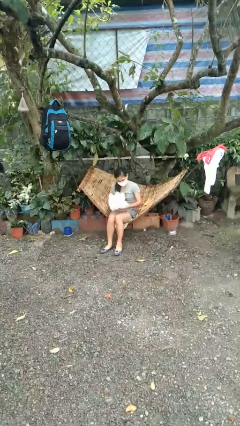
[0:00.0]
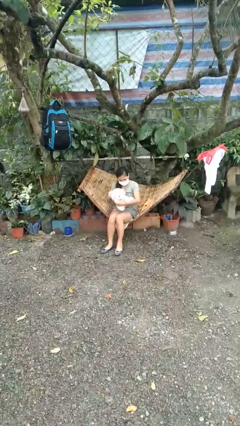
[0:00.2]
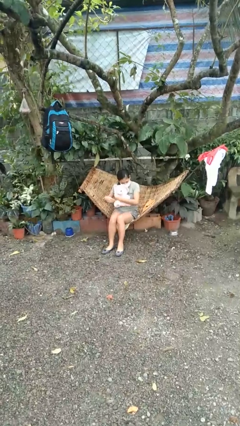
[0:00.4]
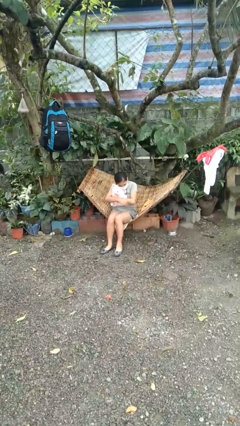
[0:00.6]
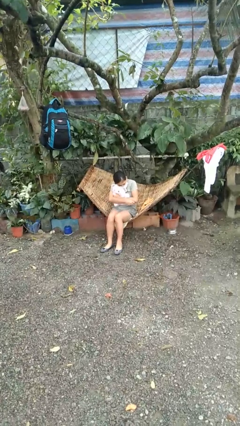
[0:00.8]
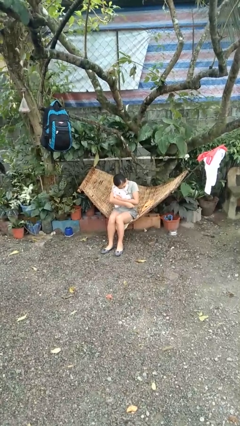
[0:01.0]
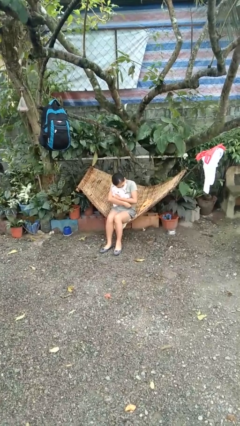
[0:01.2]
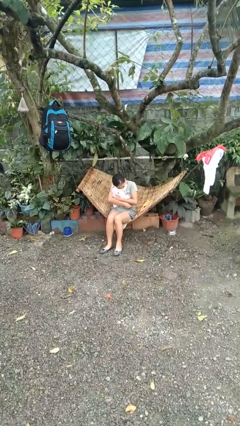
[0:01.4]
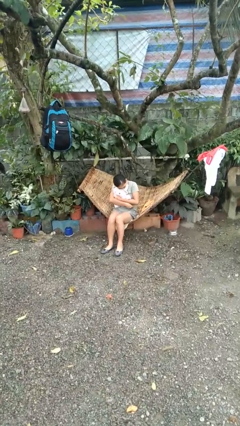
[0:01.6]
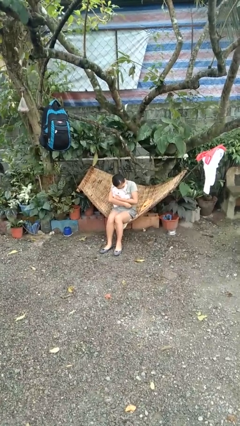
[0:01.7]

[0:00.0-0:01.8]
person hugs stuffed animal

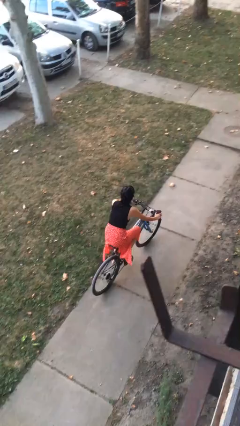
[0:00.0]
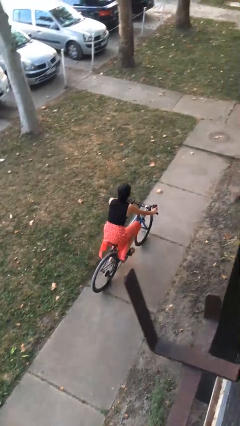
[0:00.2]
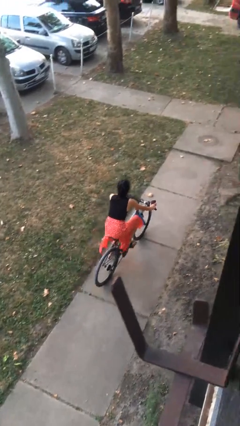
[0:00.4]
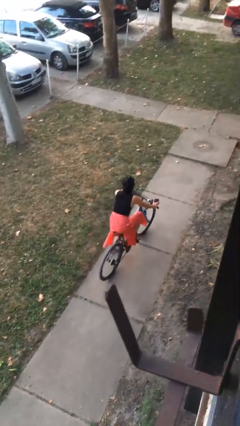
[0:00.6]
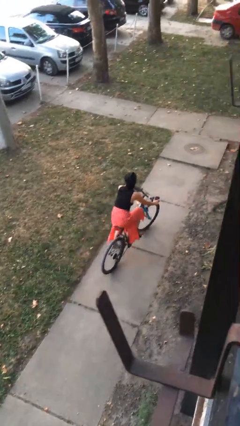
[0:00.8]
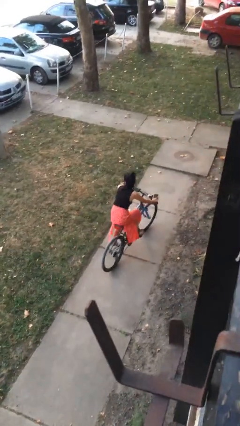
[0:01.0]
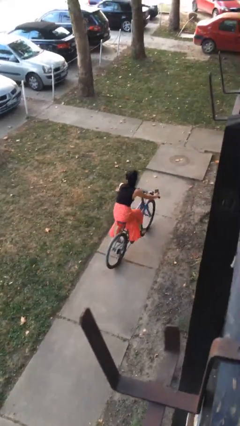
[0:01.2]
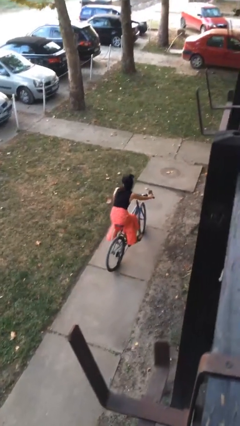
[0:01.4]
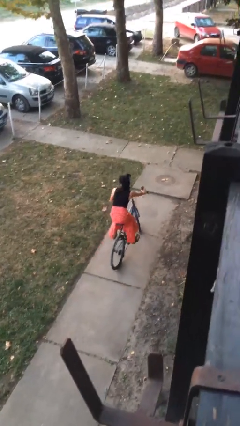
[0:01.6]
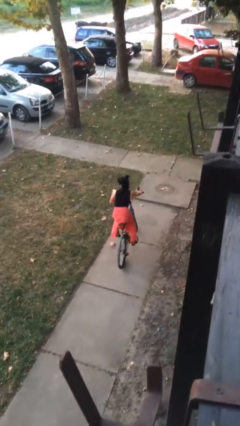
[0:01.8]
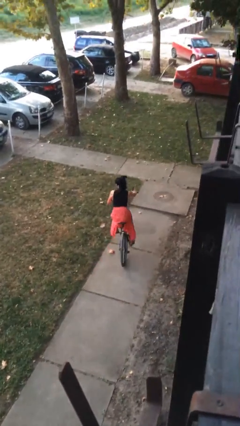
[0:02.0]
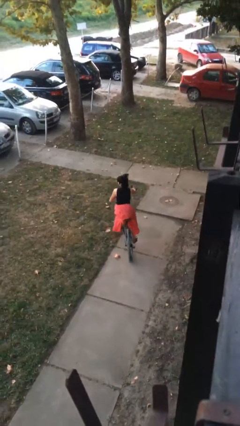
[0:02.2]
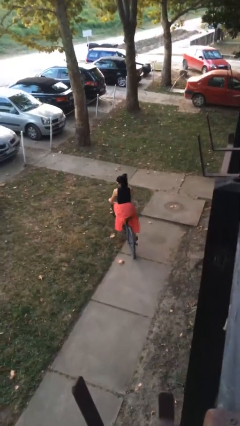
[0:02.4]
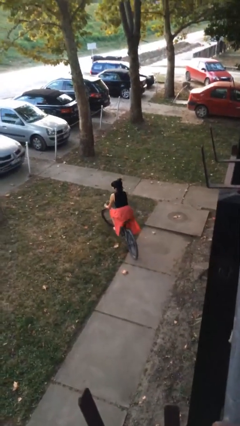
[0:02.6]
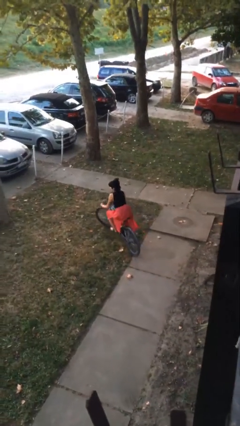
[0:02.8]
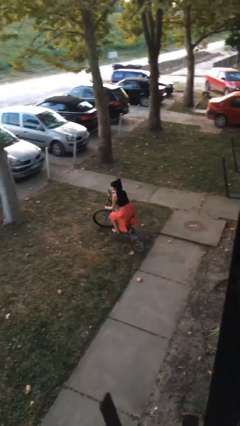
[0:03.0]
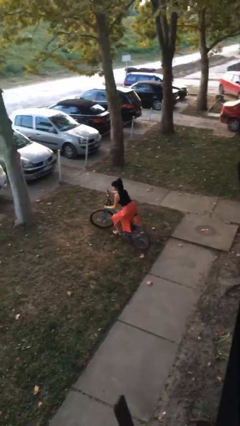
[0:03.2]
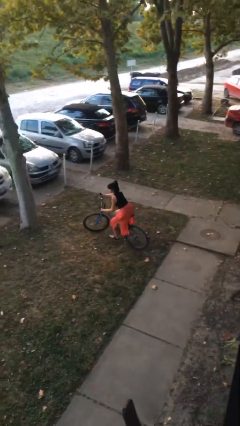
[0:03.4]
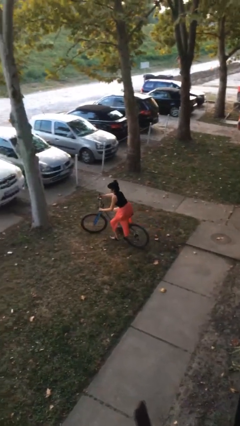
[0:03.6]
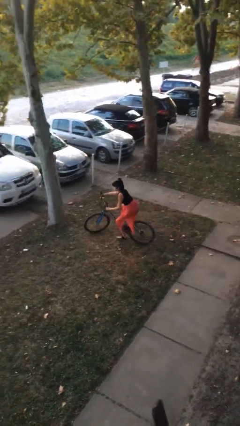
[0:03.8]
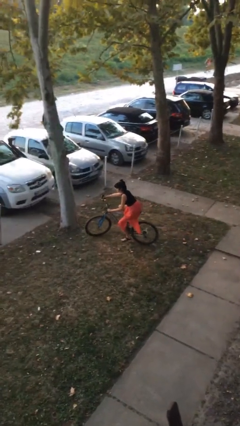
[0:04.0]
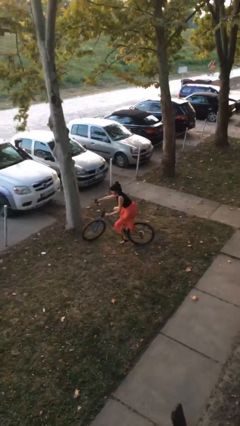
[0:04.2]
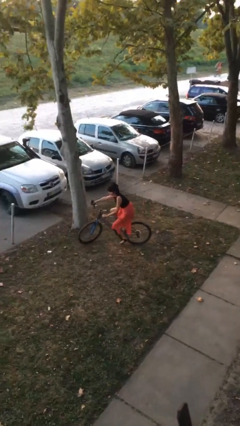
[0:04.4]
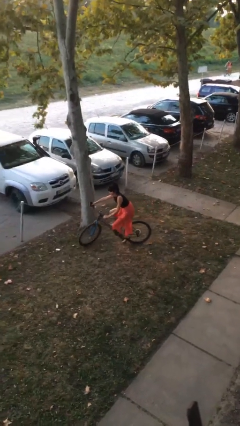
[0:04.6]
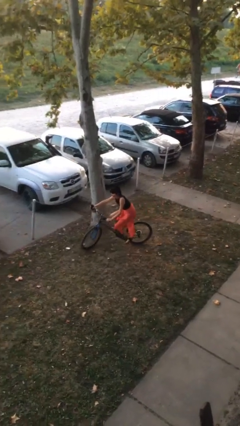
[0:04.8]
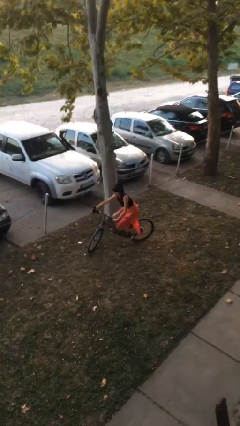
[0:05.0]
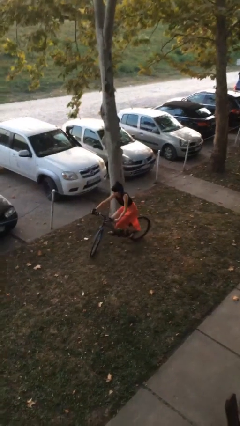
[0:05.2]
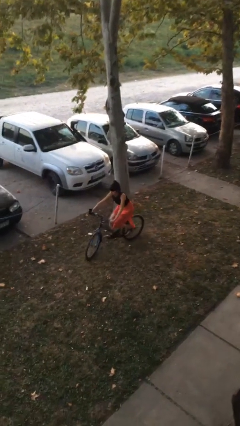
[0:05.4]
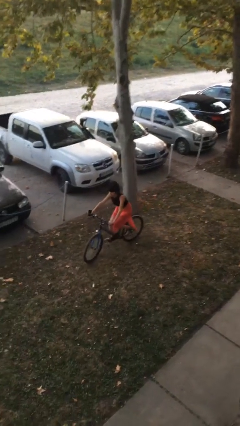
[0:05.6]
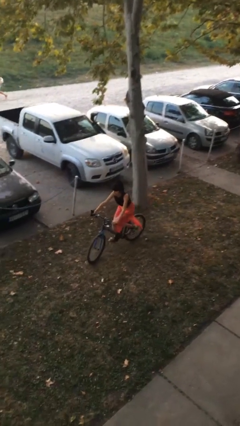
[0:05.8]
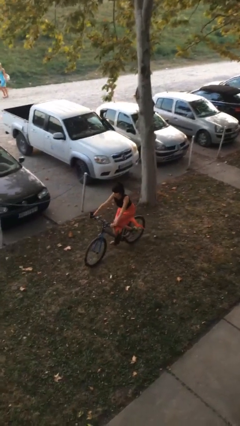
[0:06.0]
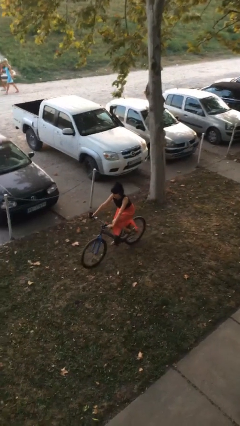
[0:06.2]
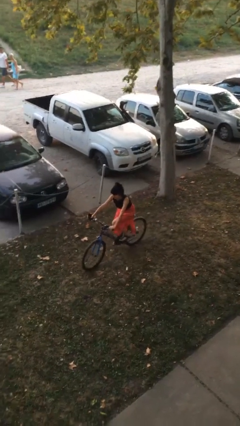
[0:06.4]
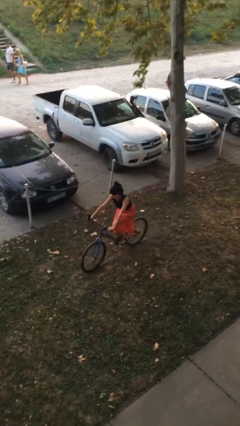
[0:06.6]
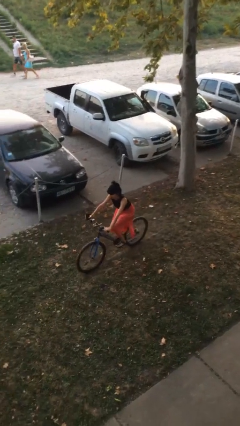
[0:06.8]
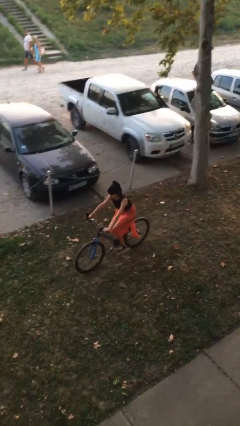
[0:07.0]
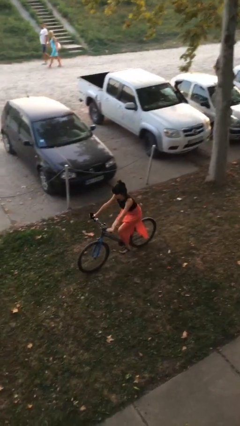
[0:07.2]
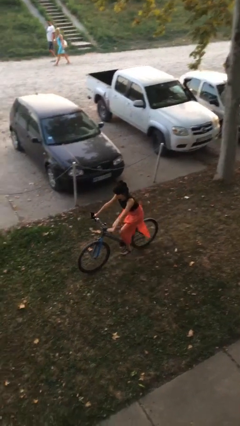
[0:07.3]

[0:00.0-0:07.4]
person rides bicycle

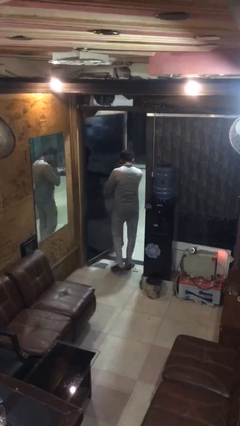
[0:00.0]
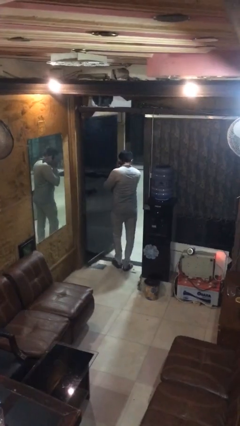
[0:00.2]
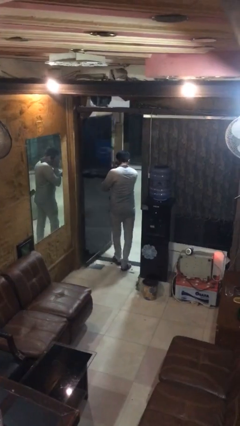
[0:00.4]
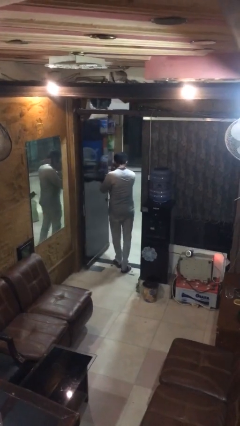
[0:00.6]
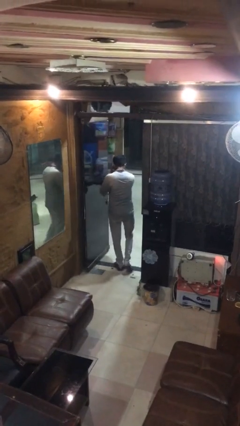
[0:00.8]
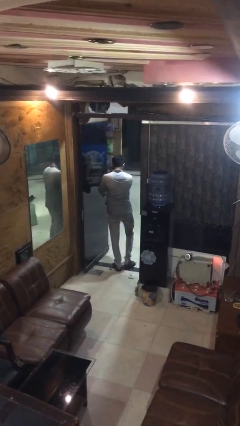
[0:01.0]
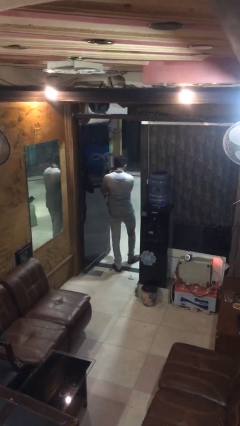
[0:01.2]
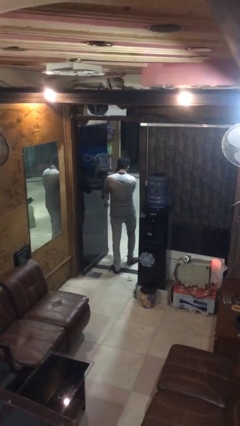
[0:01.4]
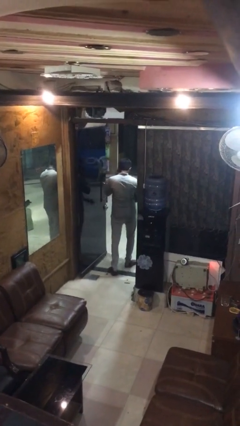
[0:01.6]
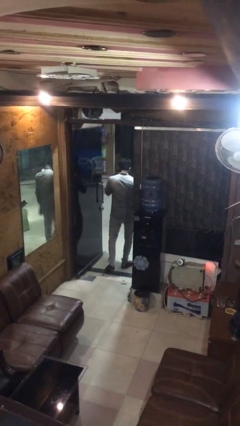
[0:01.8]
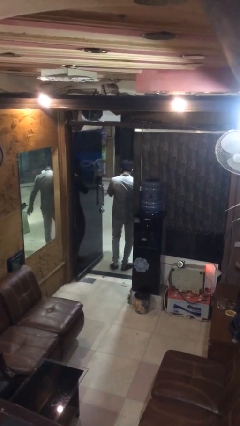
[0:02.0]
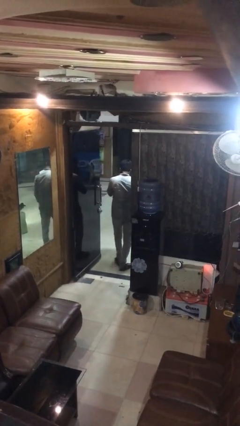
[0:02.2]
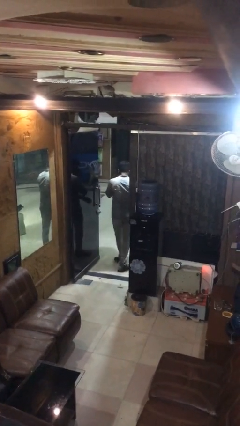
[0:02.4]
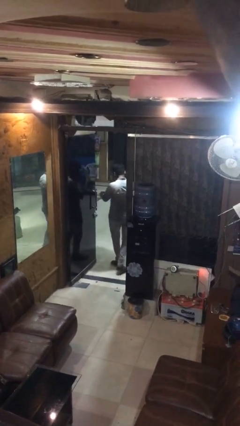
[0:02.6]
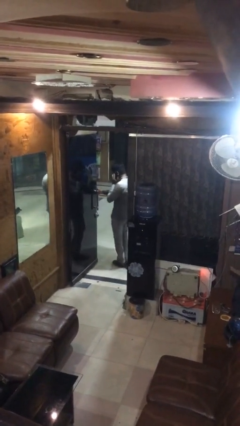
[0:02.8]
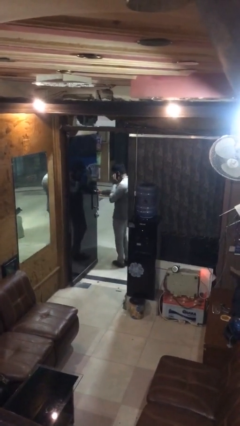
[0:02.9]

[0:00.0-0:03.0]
person exits scene through structure

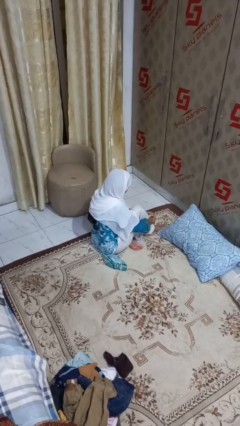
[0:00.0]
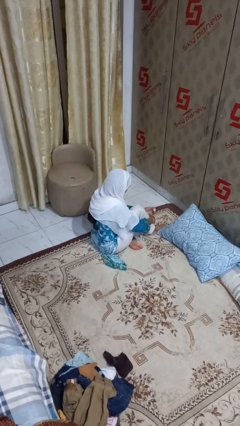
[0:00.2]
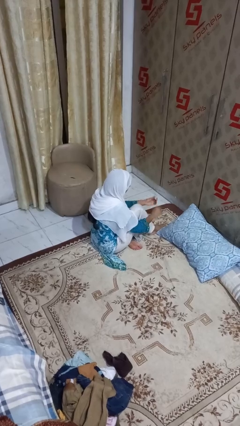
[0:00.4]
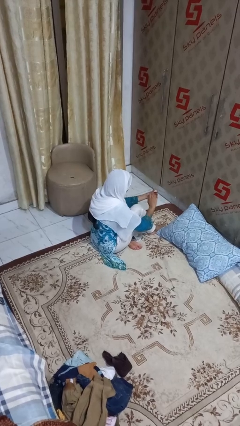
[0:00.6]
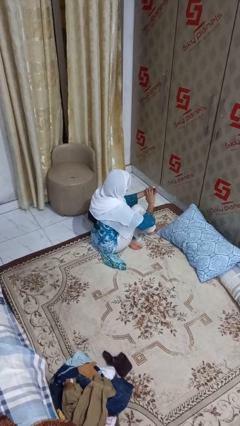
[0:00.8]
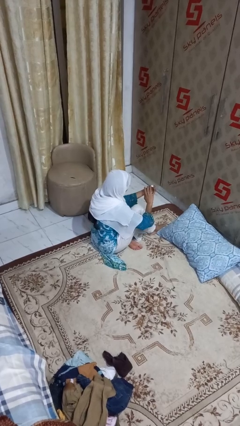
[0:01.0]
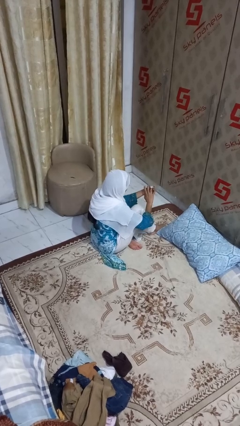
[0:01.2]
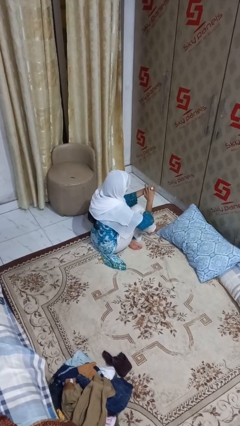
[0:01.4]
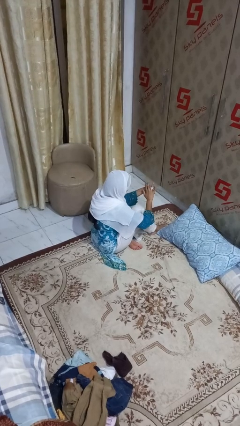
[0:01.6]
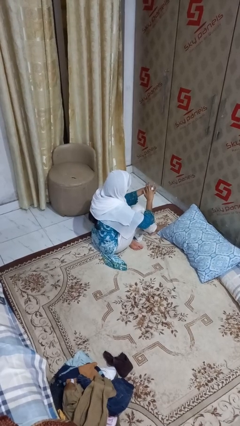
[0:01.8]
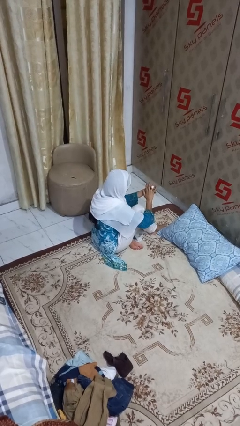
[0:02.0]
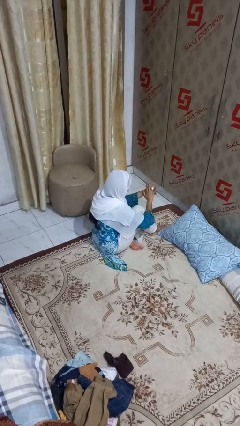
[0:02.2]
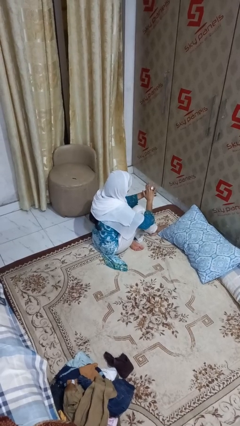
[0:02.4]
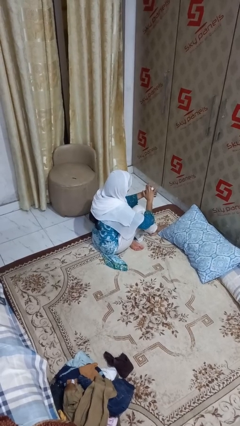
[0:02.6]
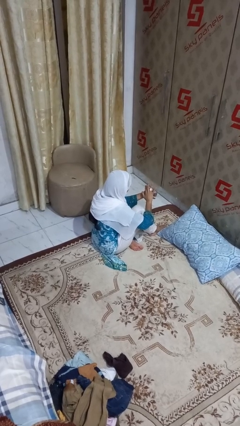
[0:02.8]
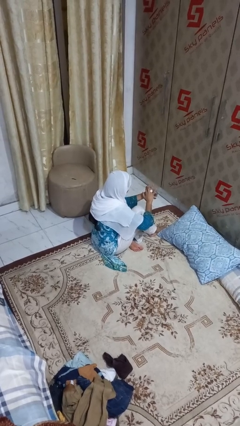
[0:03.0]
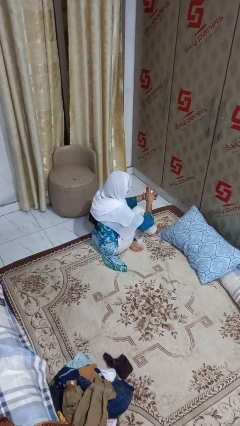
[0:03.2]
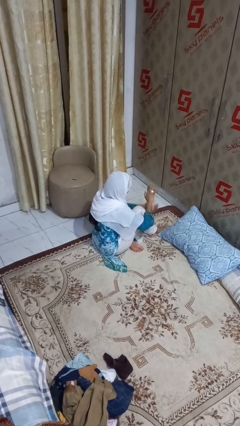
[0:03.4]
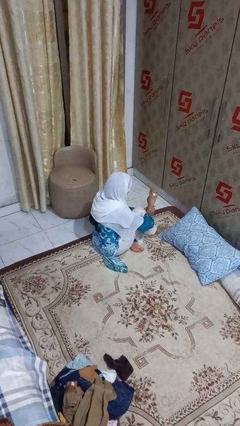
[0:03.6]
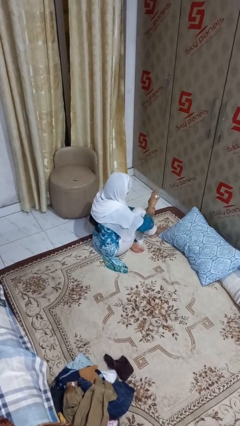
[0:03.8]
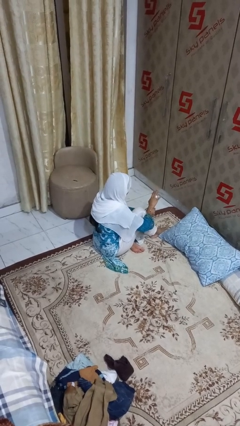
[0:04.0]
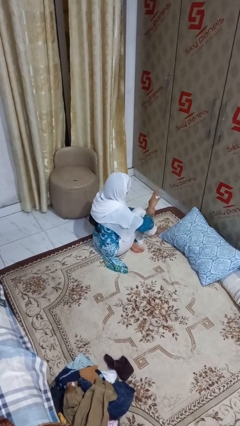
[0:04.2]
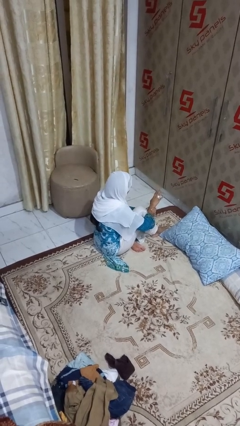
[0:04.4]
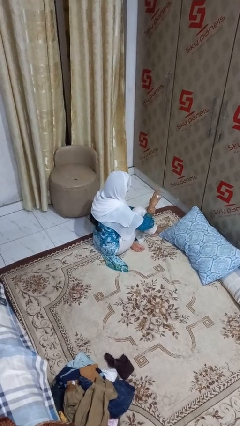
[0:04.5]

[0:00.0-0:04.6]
person puts on ring

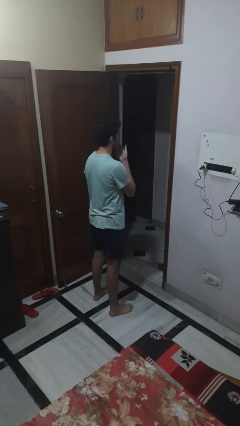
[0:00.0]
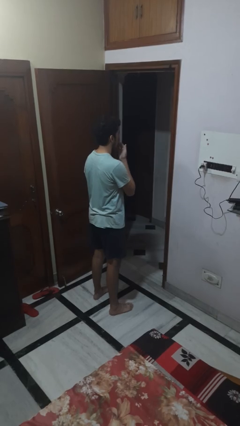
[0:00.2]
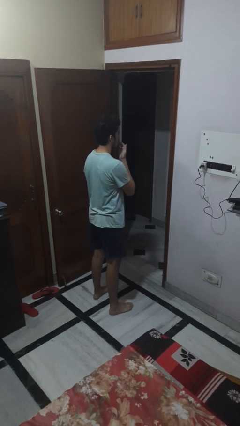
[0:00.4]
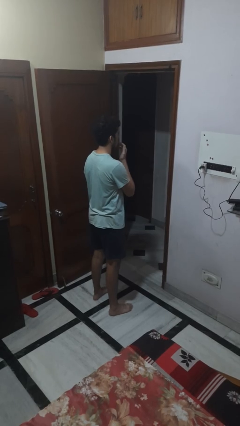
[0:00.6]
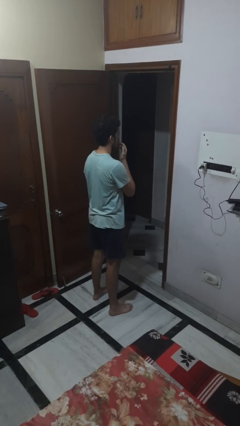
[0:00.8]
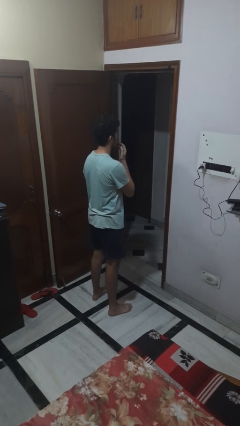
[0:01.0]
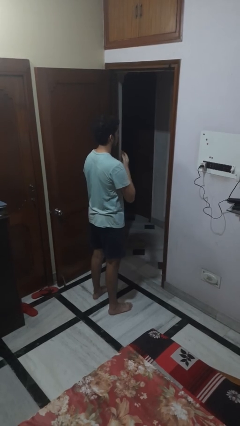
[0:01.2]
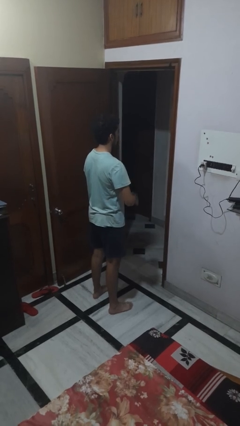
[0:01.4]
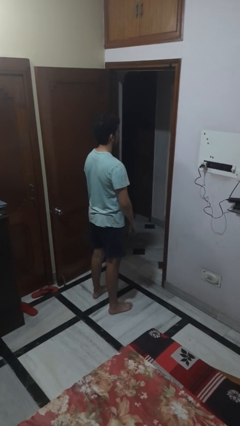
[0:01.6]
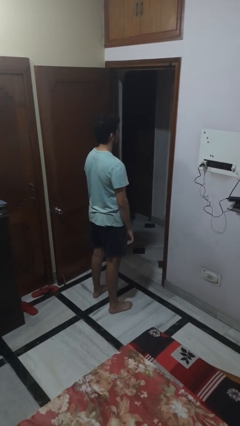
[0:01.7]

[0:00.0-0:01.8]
person licks fingers
